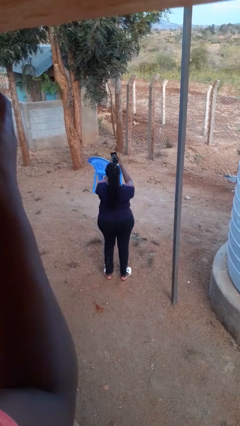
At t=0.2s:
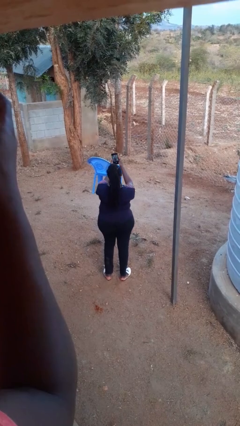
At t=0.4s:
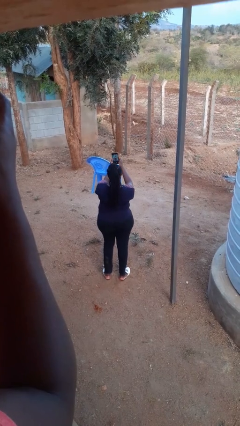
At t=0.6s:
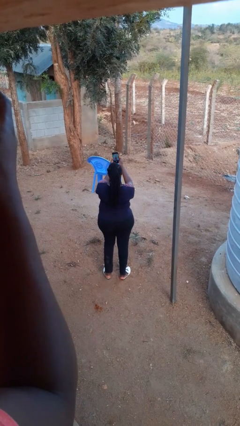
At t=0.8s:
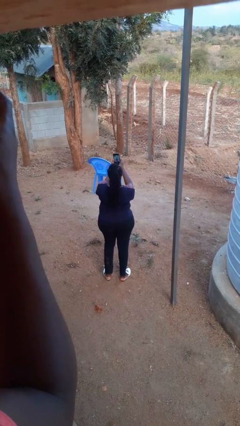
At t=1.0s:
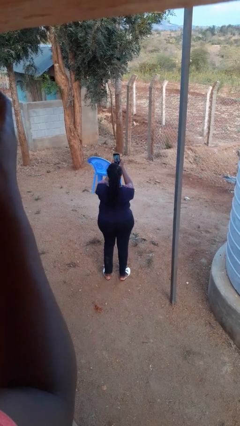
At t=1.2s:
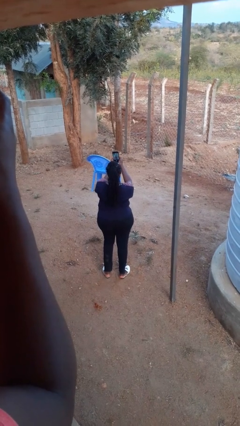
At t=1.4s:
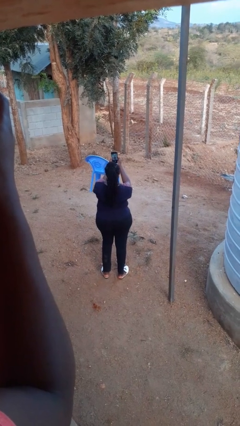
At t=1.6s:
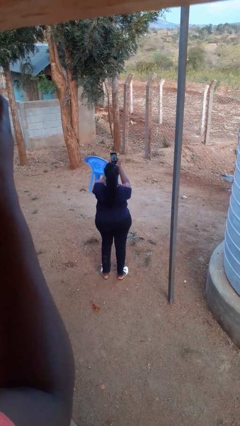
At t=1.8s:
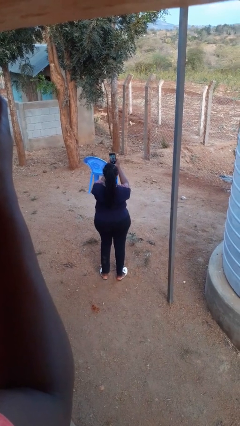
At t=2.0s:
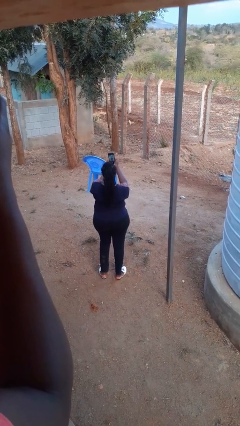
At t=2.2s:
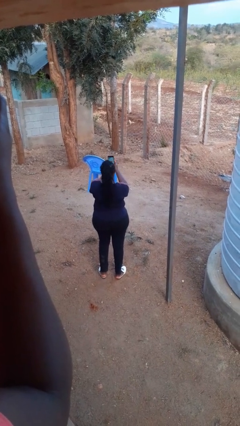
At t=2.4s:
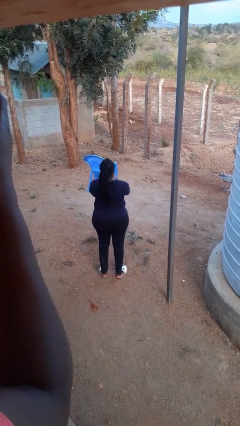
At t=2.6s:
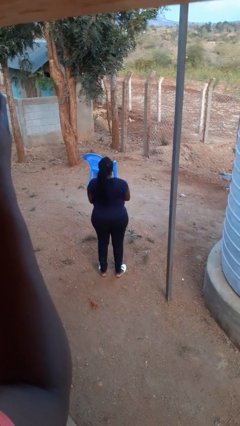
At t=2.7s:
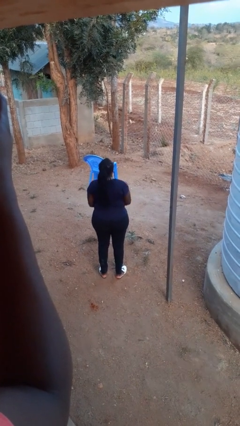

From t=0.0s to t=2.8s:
person takes selfie

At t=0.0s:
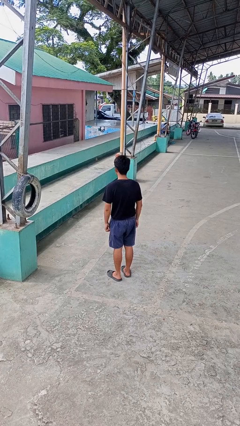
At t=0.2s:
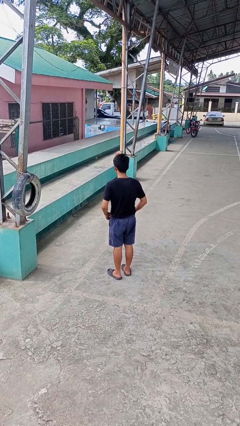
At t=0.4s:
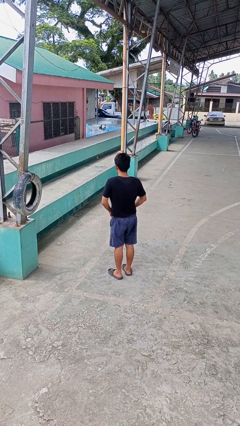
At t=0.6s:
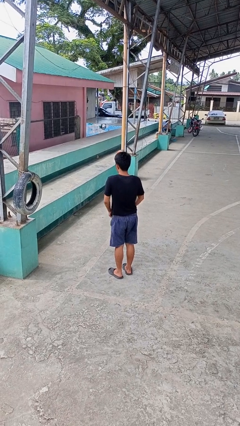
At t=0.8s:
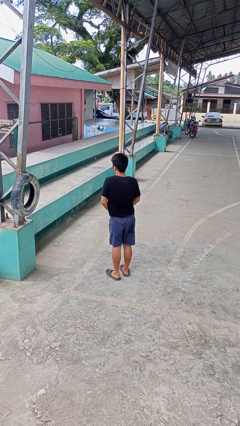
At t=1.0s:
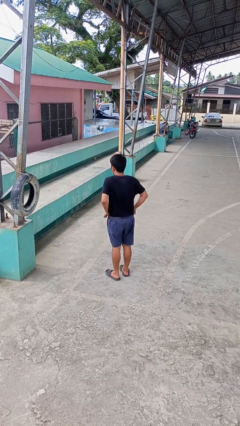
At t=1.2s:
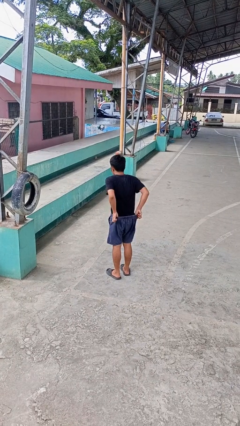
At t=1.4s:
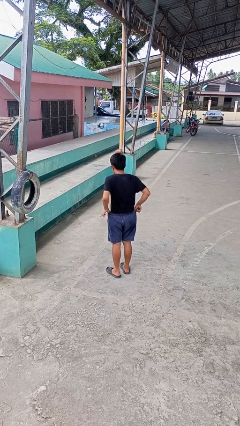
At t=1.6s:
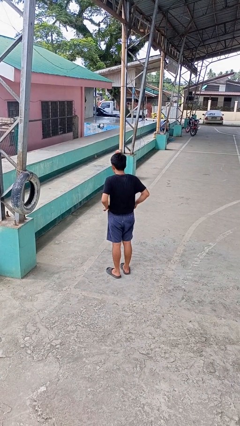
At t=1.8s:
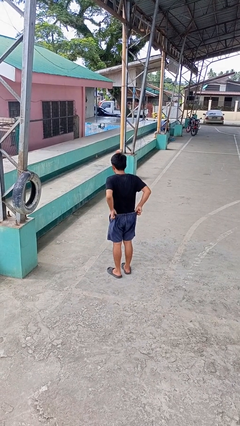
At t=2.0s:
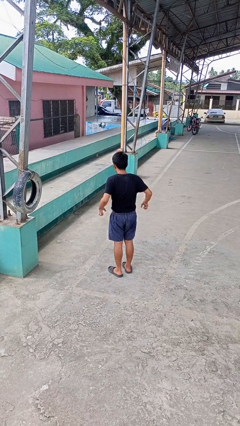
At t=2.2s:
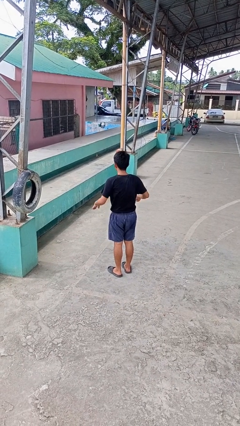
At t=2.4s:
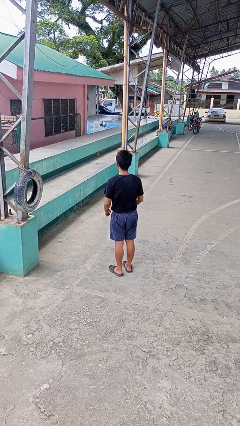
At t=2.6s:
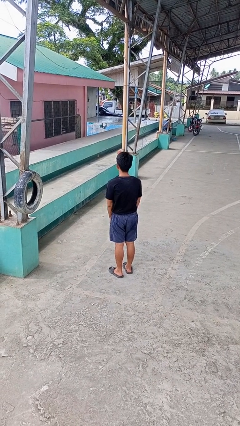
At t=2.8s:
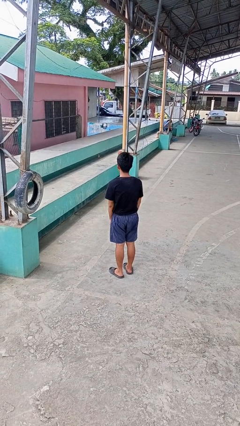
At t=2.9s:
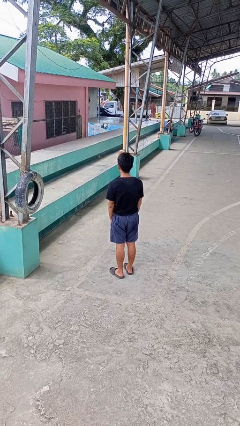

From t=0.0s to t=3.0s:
person hikes up pants

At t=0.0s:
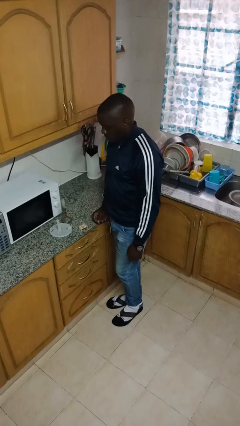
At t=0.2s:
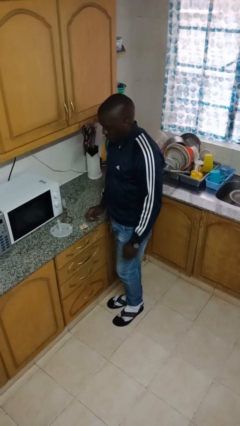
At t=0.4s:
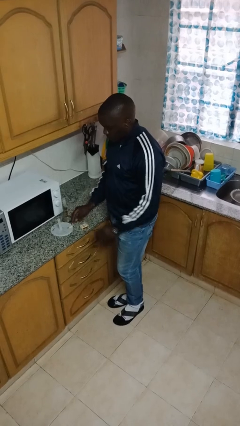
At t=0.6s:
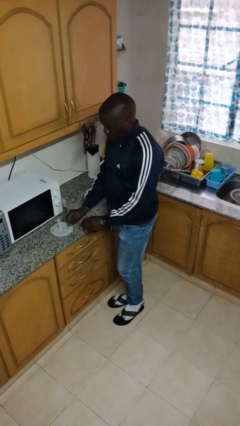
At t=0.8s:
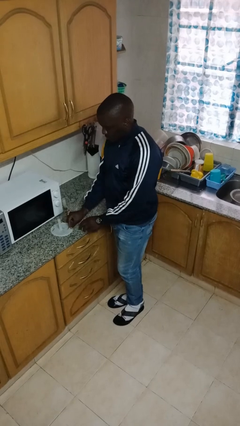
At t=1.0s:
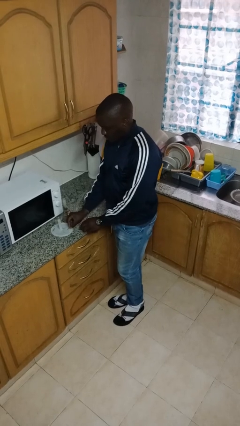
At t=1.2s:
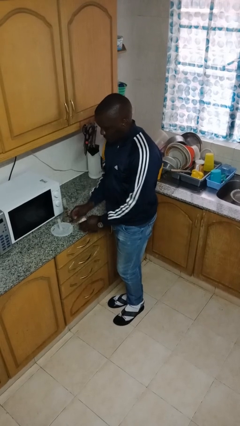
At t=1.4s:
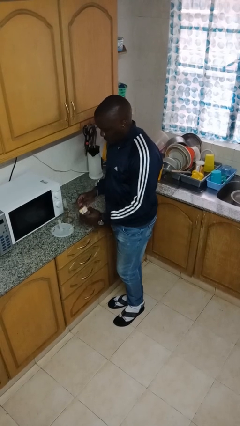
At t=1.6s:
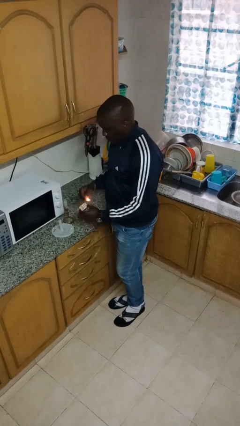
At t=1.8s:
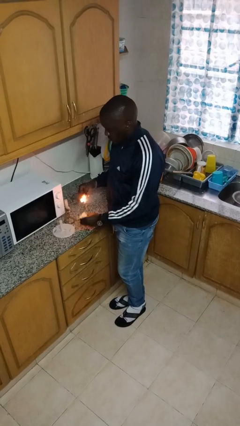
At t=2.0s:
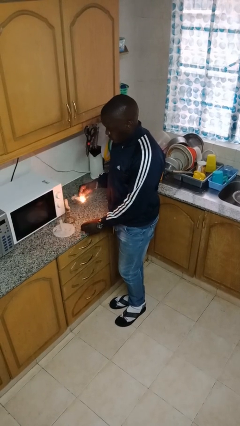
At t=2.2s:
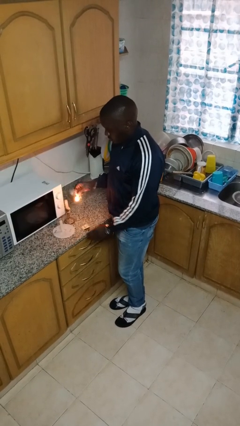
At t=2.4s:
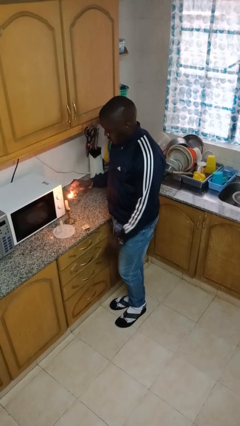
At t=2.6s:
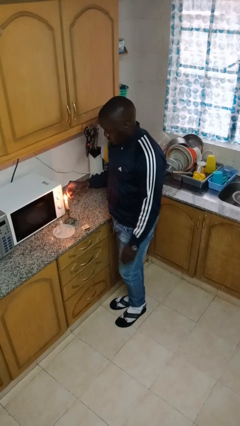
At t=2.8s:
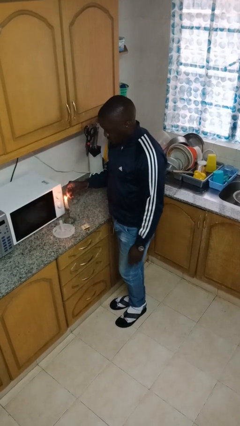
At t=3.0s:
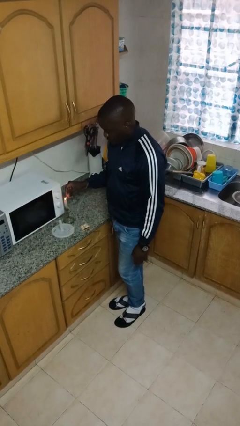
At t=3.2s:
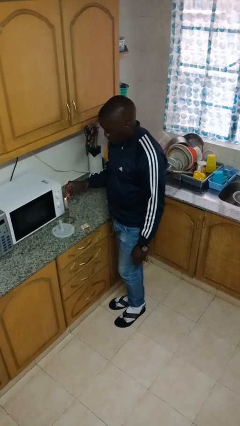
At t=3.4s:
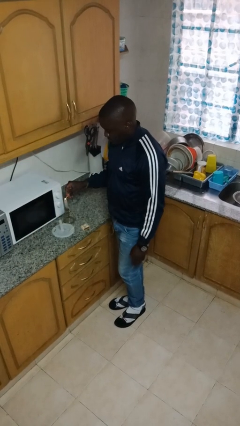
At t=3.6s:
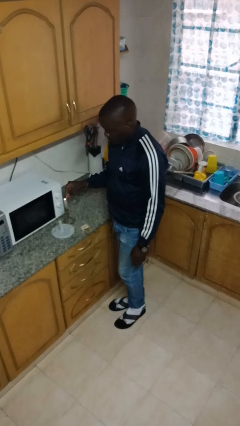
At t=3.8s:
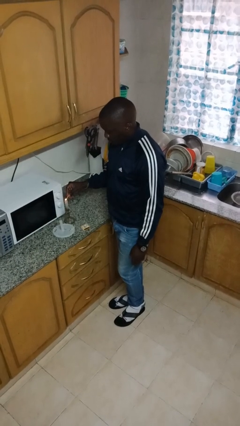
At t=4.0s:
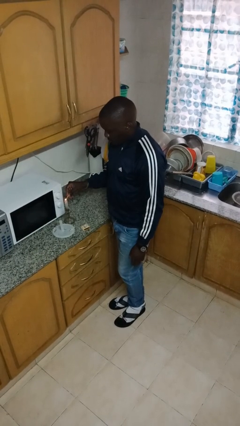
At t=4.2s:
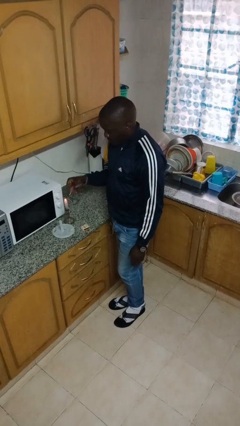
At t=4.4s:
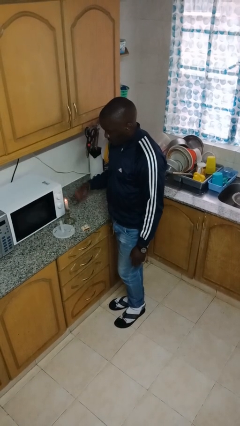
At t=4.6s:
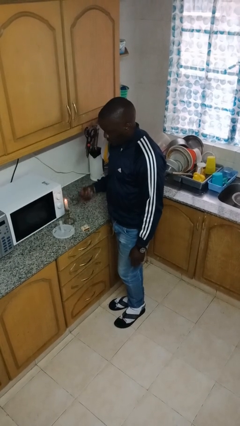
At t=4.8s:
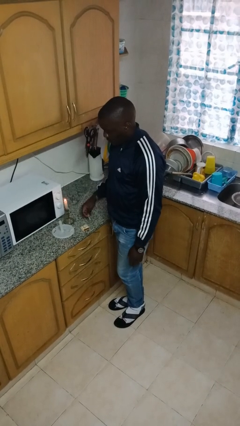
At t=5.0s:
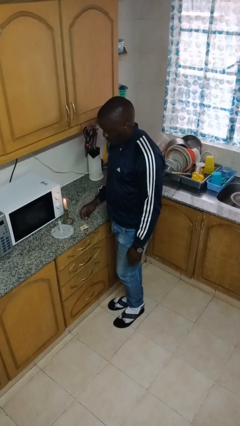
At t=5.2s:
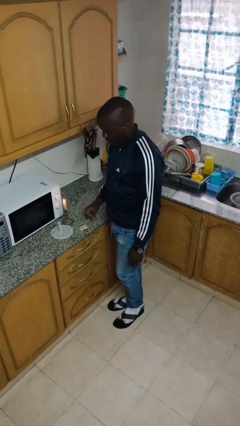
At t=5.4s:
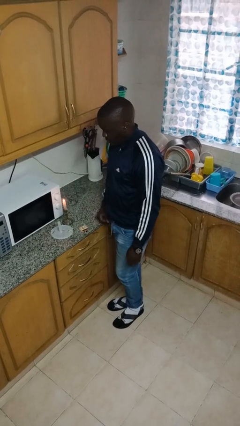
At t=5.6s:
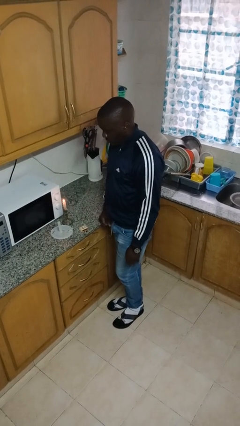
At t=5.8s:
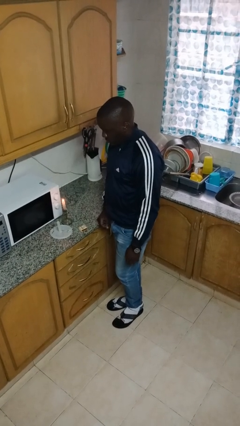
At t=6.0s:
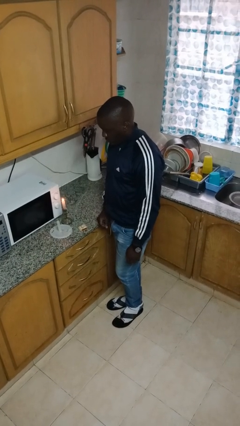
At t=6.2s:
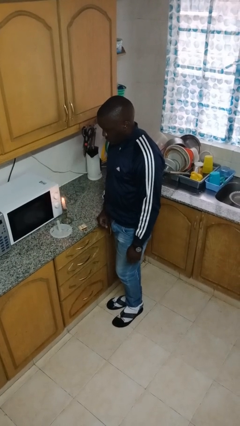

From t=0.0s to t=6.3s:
person lights candle

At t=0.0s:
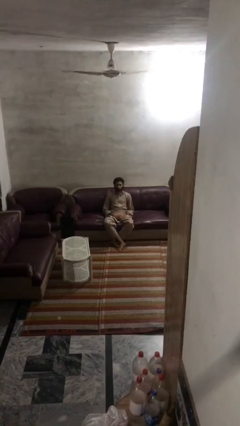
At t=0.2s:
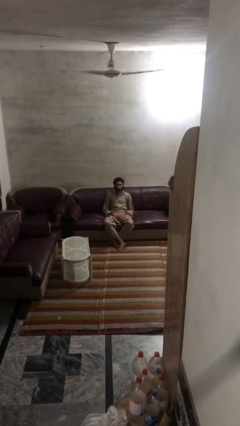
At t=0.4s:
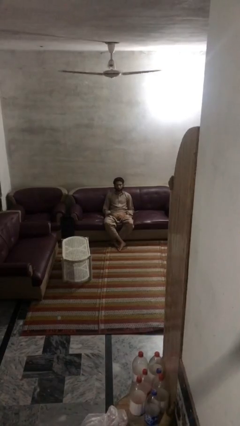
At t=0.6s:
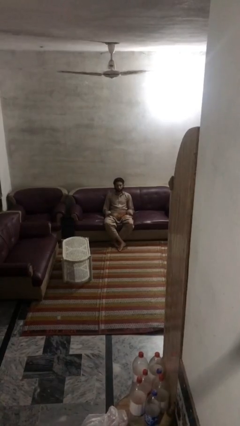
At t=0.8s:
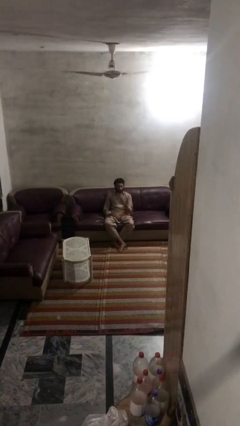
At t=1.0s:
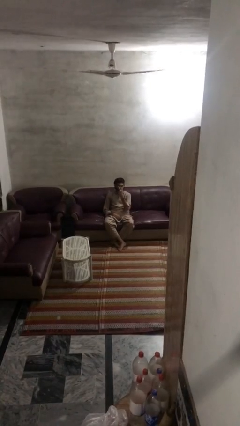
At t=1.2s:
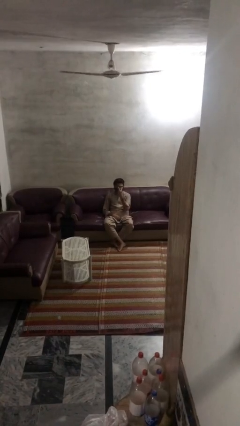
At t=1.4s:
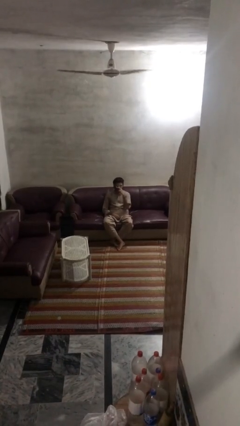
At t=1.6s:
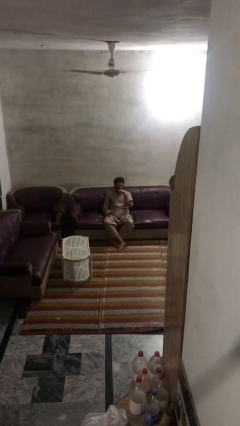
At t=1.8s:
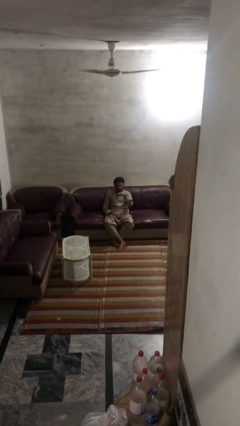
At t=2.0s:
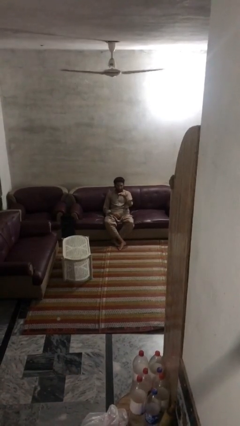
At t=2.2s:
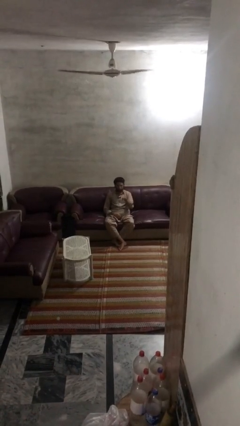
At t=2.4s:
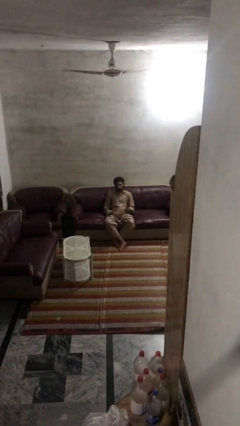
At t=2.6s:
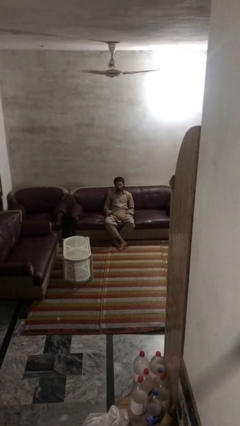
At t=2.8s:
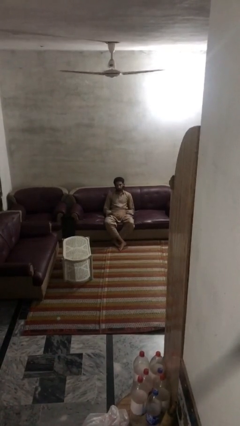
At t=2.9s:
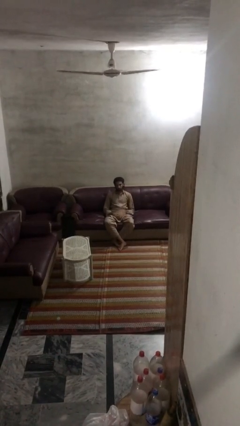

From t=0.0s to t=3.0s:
person gestures watch closely

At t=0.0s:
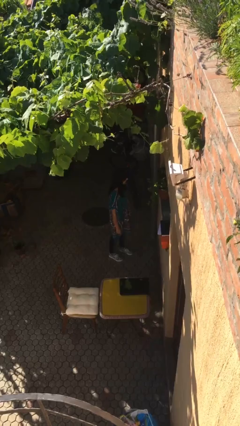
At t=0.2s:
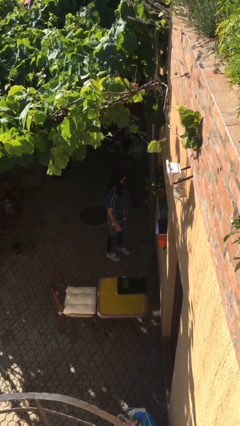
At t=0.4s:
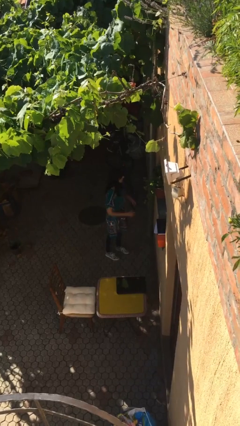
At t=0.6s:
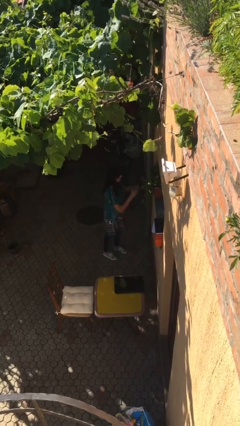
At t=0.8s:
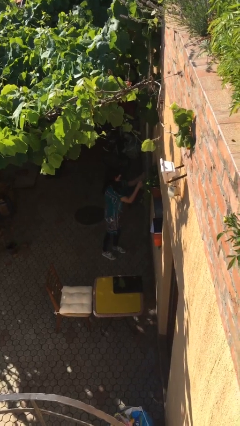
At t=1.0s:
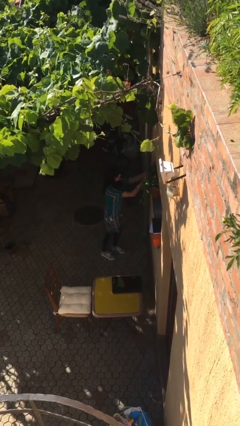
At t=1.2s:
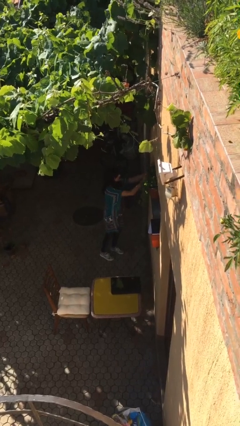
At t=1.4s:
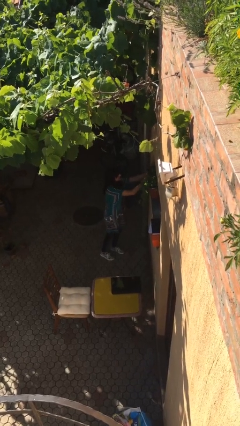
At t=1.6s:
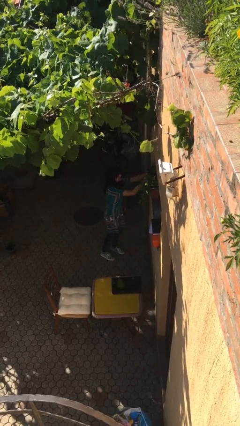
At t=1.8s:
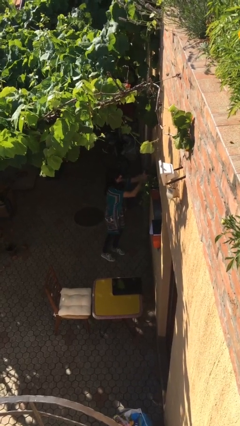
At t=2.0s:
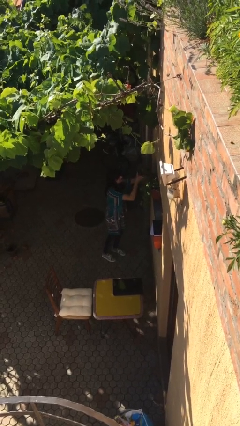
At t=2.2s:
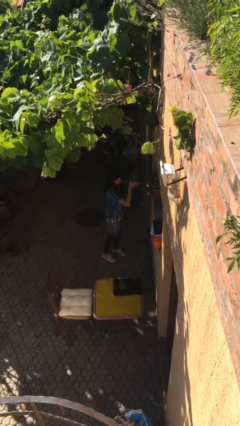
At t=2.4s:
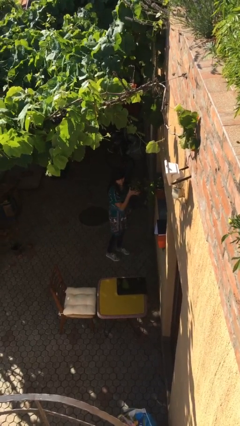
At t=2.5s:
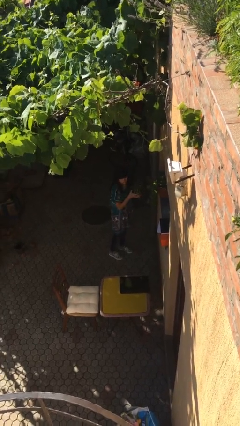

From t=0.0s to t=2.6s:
person picks up object from shelf
